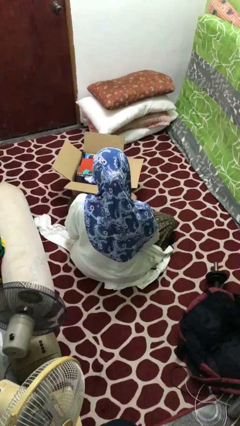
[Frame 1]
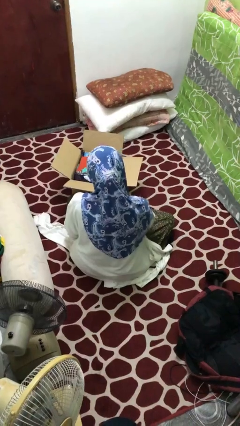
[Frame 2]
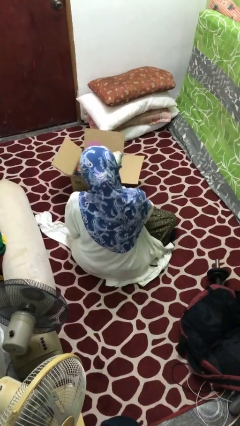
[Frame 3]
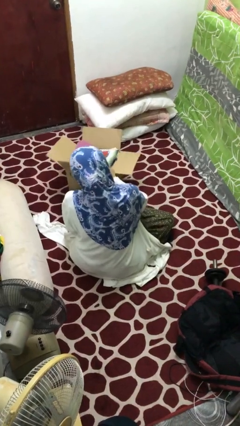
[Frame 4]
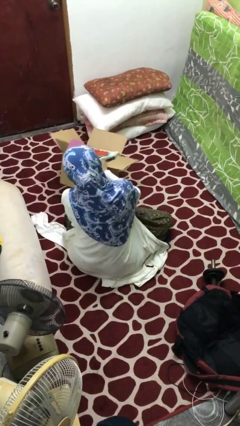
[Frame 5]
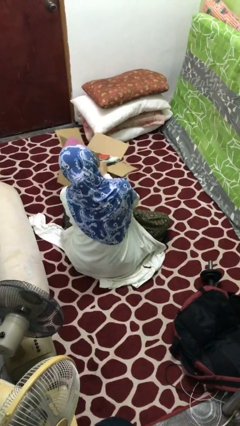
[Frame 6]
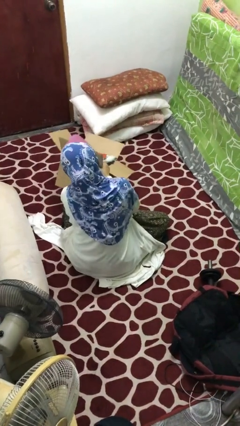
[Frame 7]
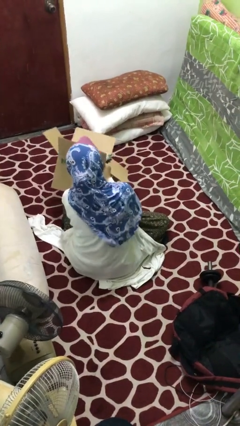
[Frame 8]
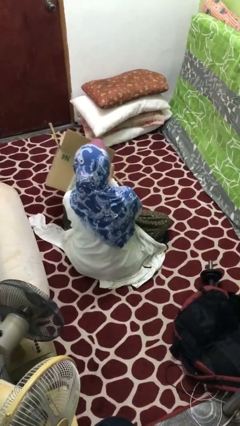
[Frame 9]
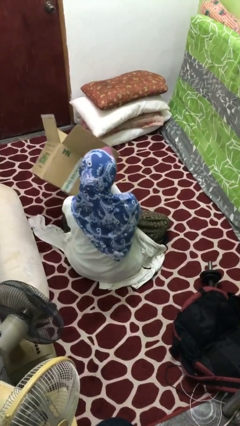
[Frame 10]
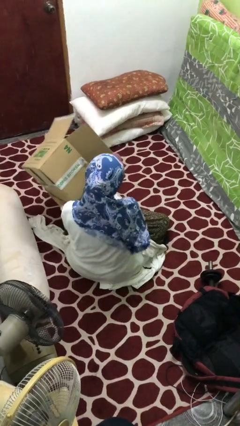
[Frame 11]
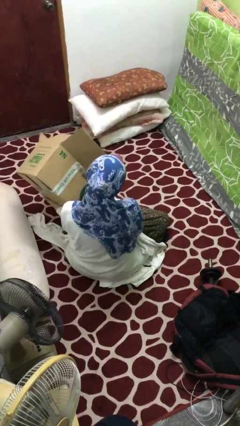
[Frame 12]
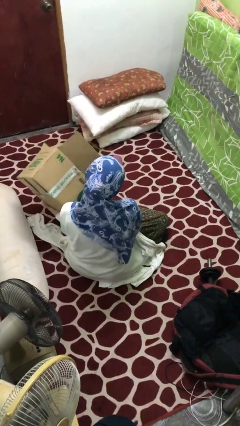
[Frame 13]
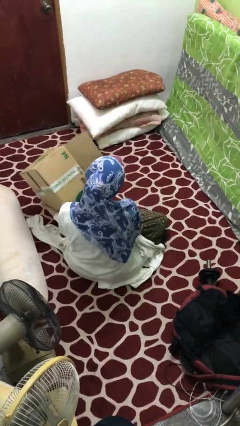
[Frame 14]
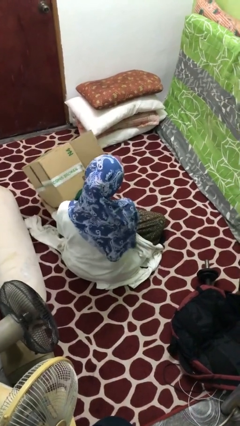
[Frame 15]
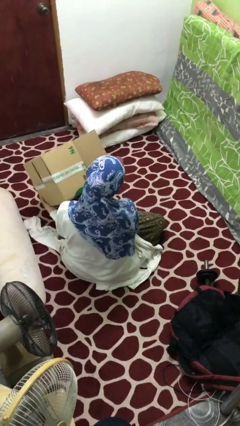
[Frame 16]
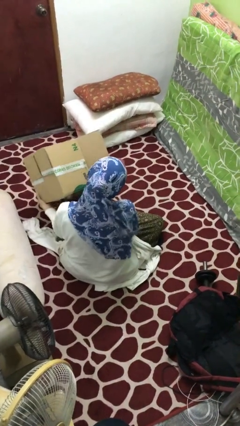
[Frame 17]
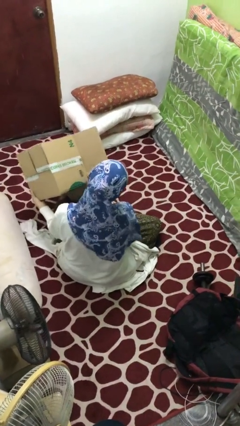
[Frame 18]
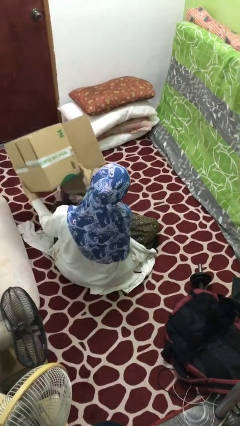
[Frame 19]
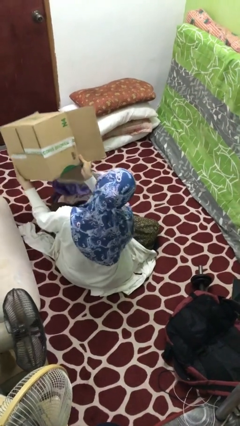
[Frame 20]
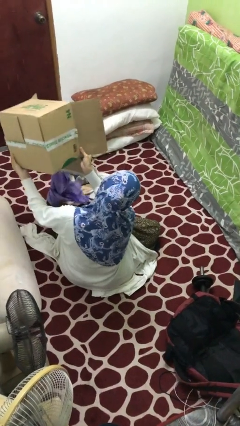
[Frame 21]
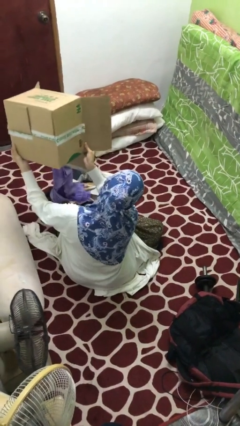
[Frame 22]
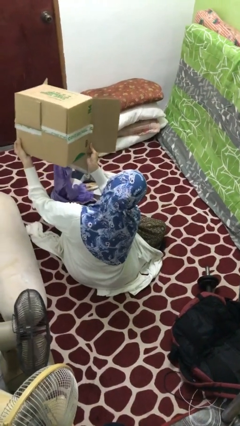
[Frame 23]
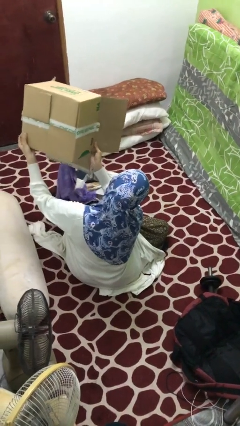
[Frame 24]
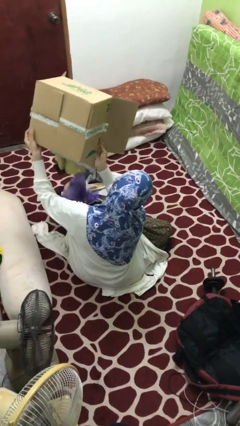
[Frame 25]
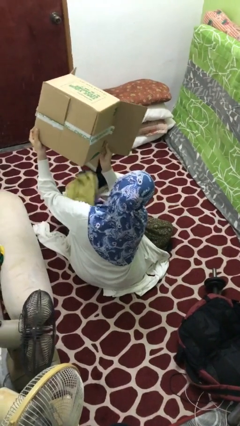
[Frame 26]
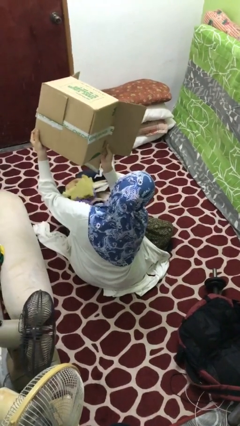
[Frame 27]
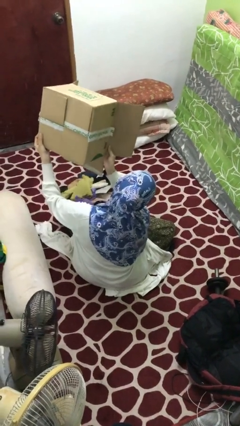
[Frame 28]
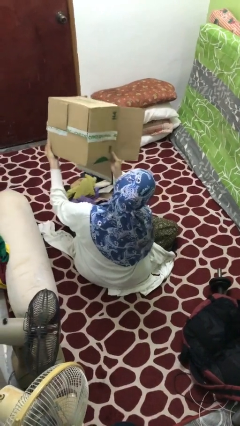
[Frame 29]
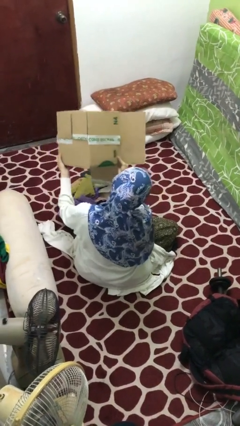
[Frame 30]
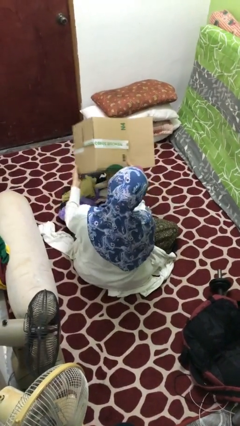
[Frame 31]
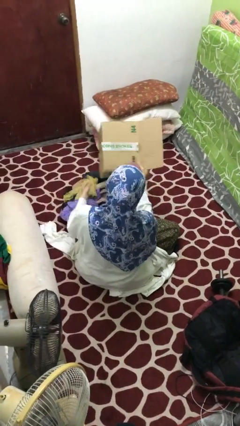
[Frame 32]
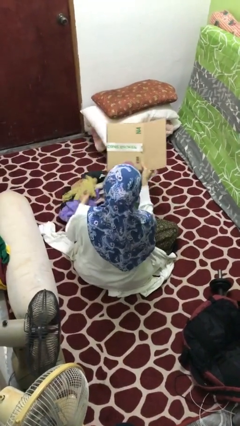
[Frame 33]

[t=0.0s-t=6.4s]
person unloads box onto floor

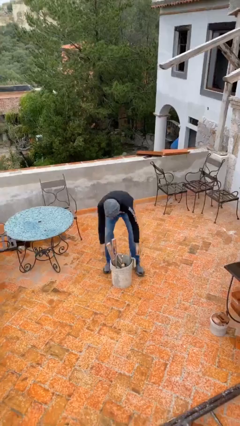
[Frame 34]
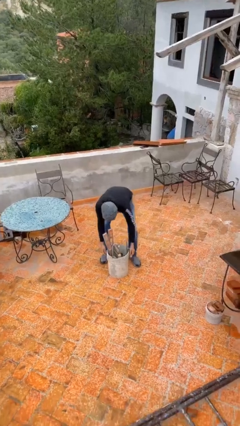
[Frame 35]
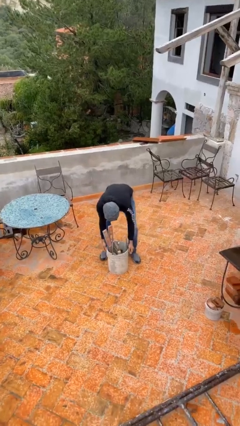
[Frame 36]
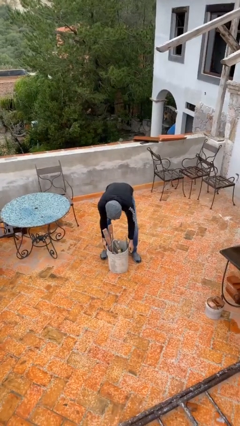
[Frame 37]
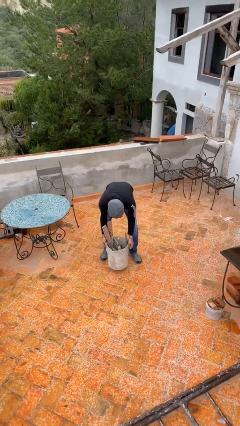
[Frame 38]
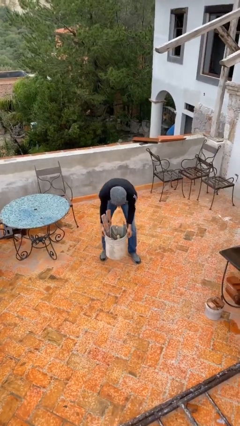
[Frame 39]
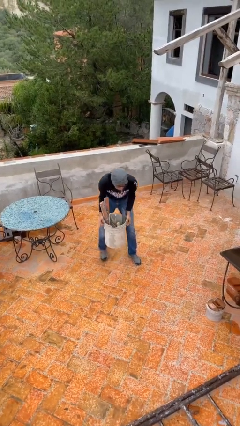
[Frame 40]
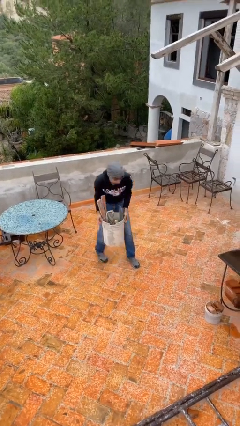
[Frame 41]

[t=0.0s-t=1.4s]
person picks up object from floor

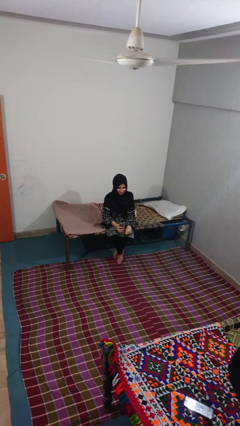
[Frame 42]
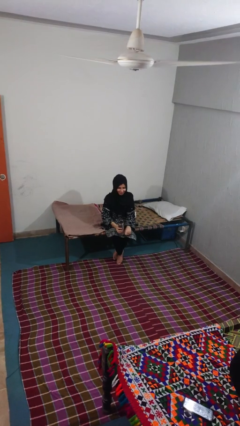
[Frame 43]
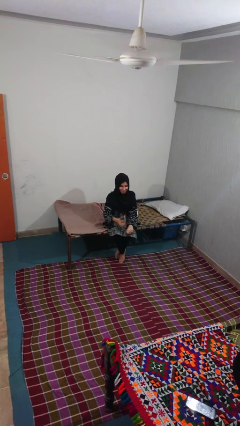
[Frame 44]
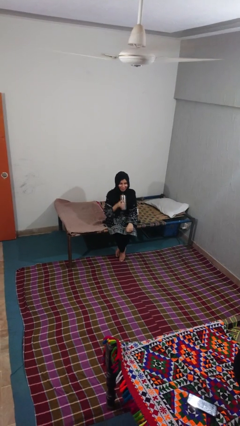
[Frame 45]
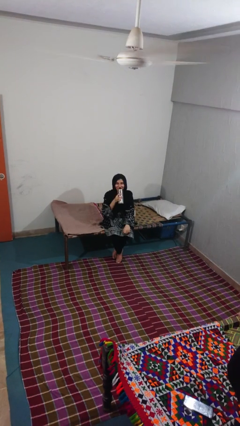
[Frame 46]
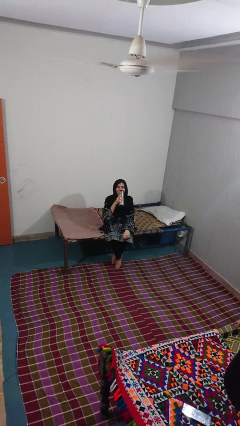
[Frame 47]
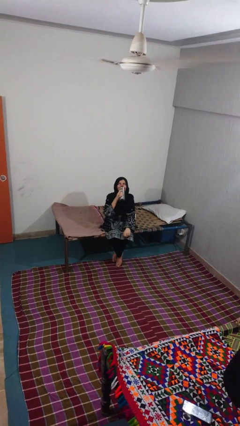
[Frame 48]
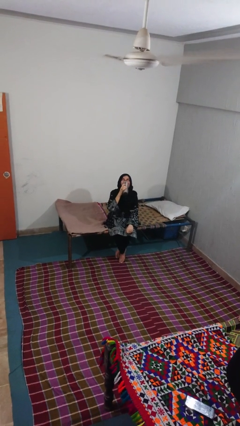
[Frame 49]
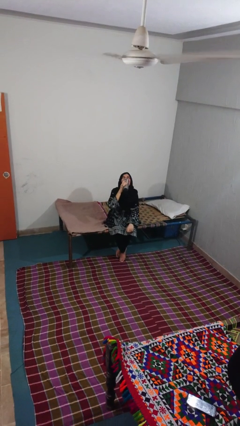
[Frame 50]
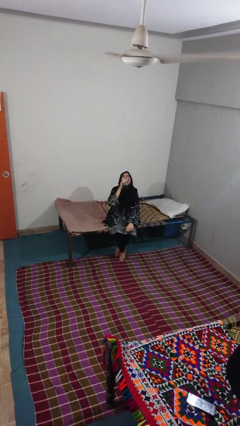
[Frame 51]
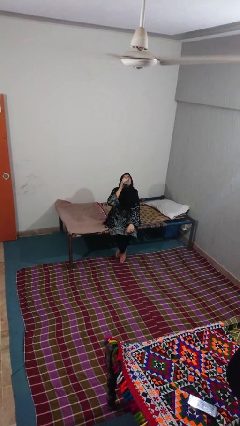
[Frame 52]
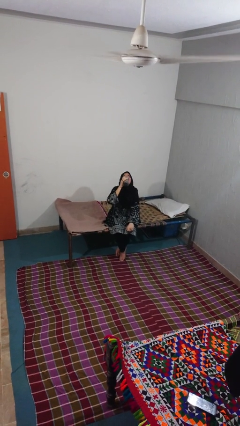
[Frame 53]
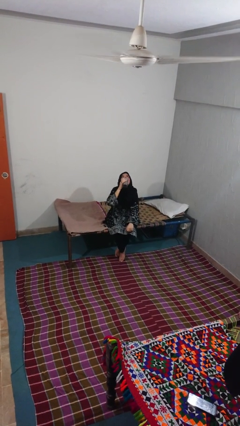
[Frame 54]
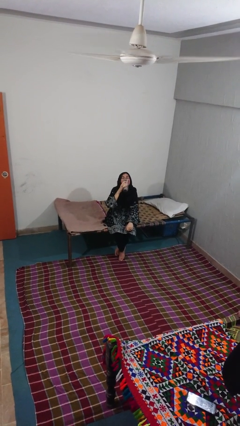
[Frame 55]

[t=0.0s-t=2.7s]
person drinks from beverage can

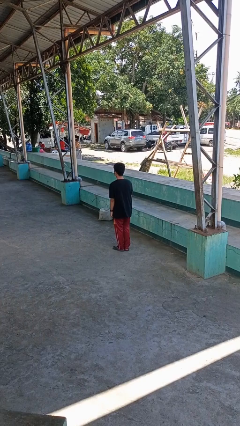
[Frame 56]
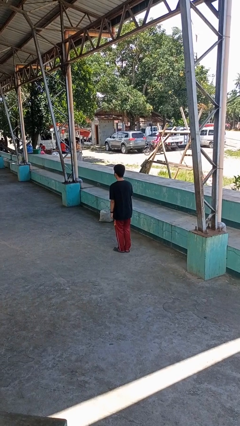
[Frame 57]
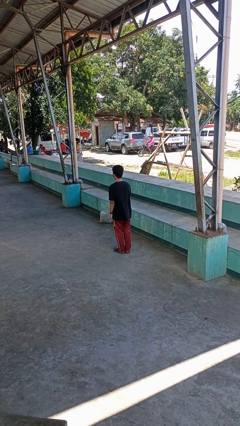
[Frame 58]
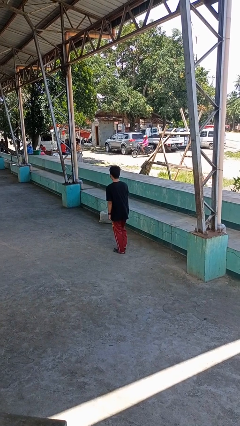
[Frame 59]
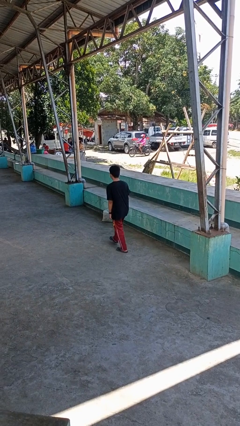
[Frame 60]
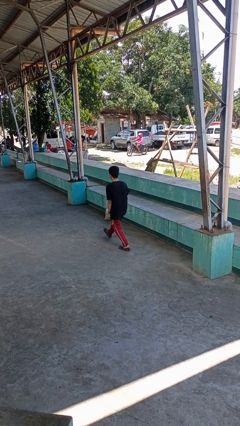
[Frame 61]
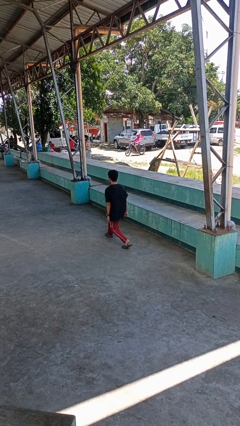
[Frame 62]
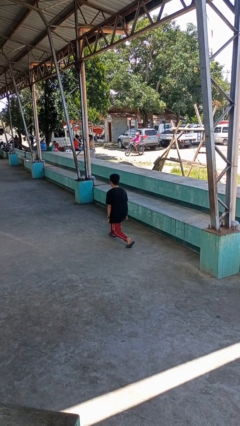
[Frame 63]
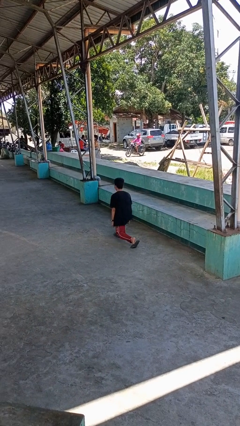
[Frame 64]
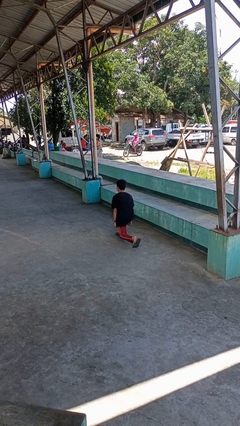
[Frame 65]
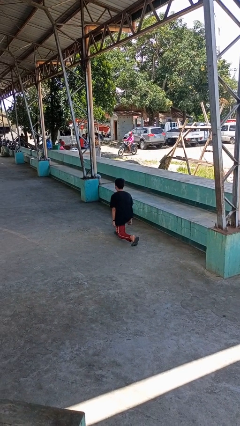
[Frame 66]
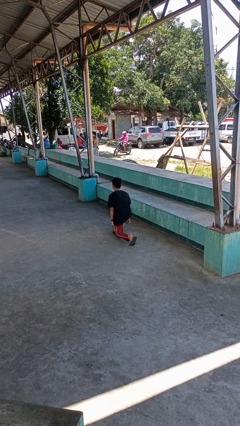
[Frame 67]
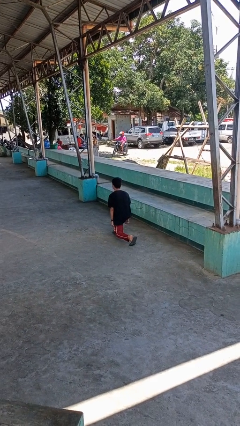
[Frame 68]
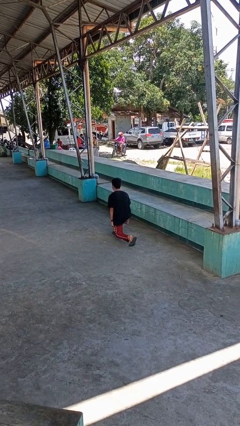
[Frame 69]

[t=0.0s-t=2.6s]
person exercises with lunges

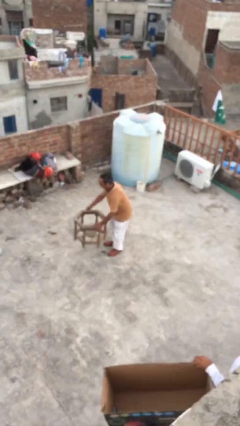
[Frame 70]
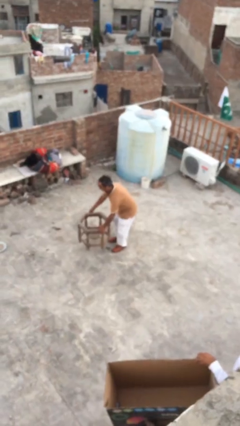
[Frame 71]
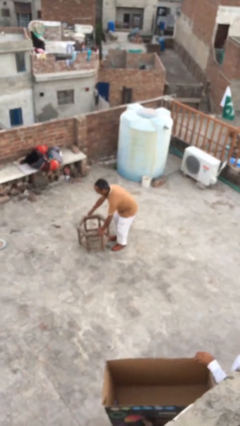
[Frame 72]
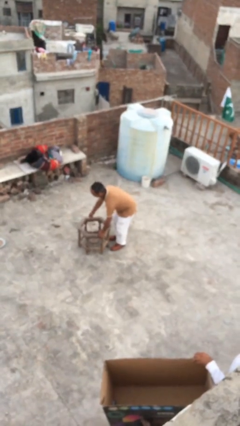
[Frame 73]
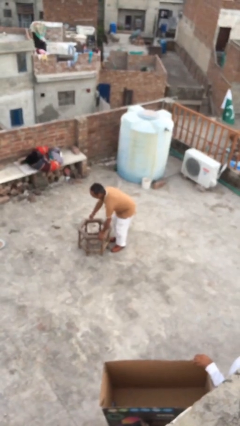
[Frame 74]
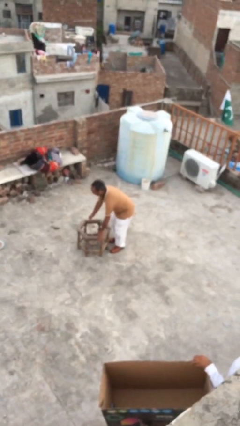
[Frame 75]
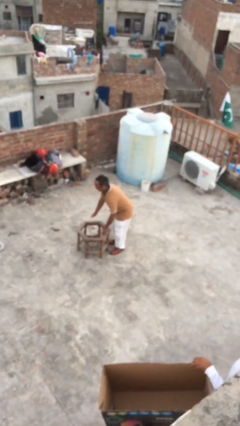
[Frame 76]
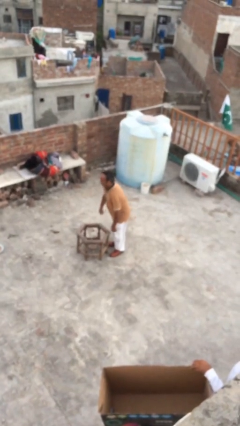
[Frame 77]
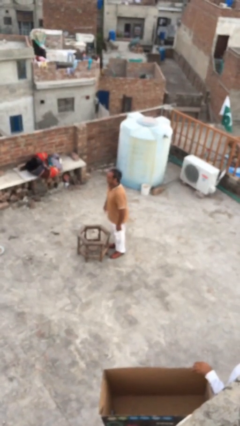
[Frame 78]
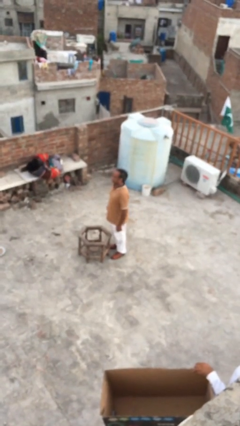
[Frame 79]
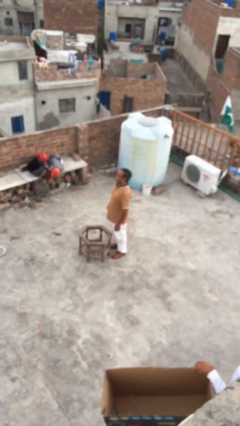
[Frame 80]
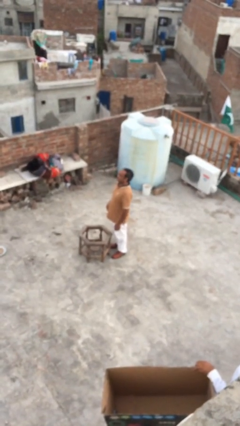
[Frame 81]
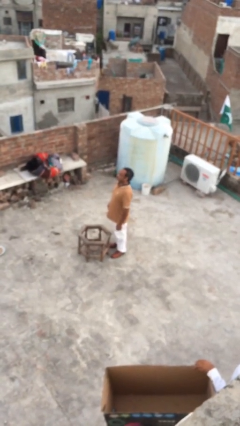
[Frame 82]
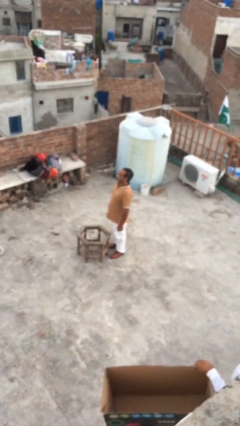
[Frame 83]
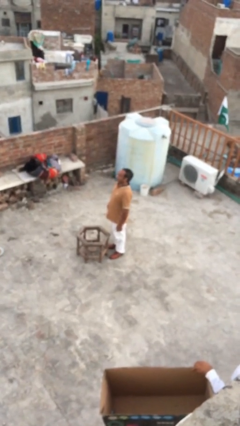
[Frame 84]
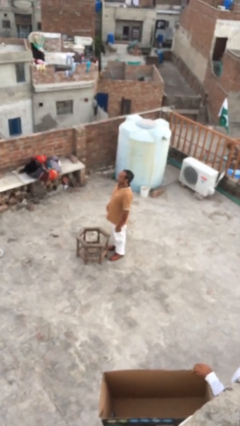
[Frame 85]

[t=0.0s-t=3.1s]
person puts down object on floor

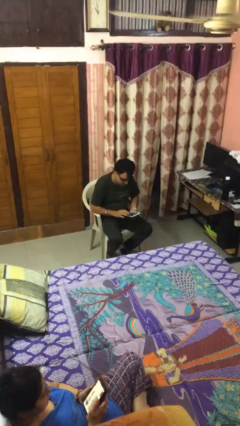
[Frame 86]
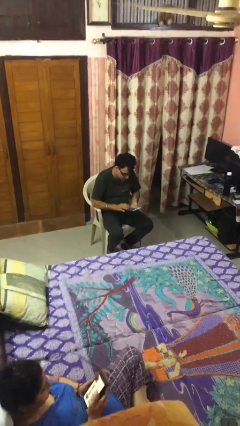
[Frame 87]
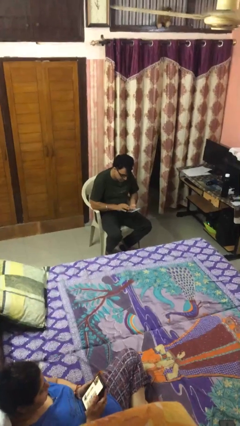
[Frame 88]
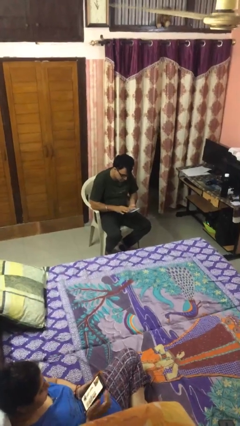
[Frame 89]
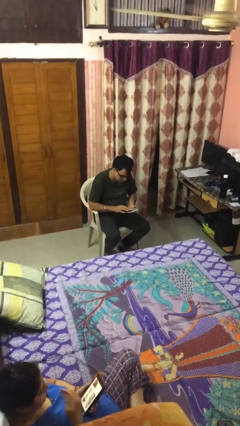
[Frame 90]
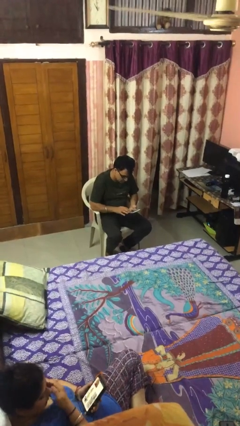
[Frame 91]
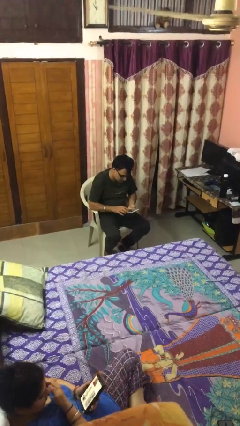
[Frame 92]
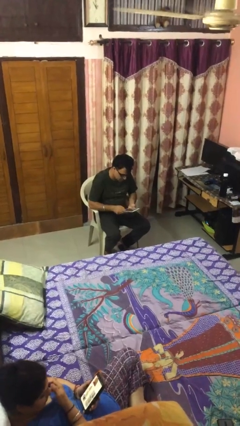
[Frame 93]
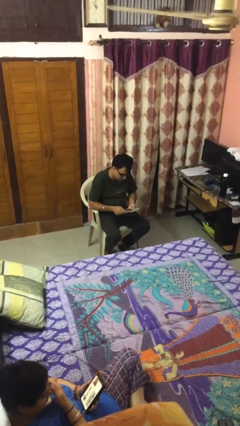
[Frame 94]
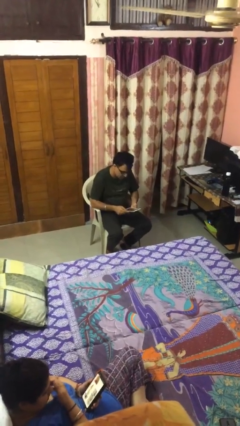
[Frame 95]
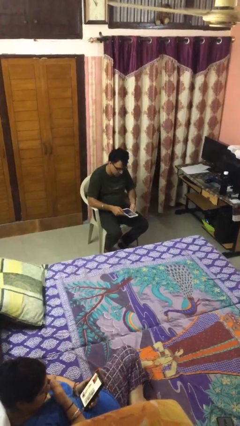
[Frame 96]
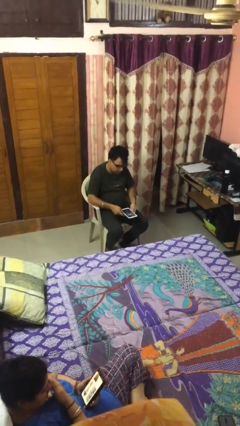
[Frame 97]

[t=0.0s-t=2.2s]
person interacts with tablet
